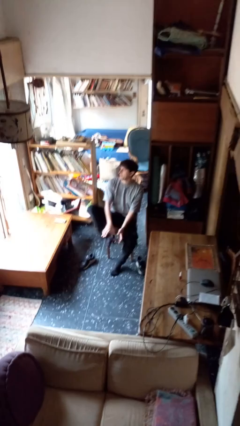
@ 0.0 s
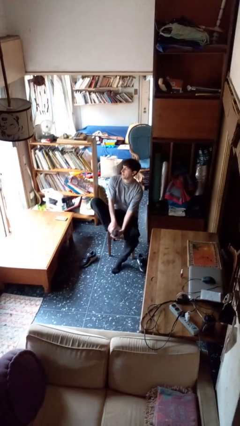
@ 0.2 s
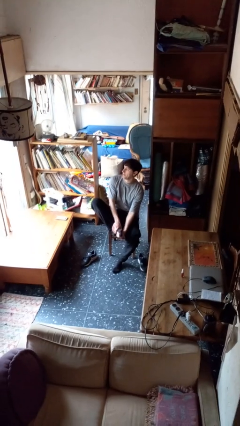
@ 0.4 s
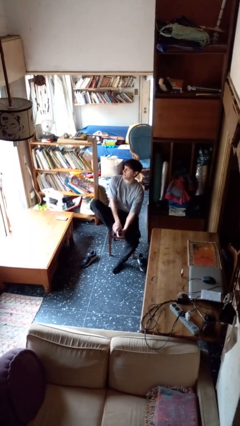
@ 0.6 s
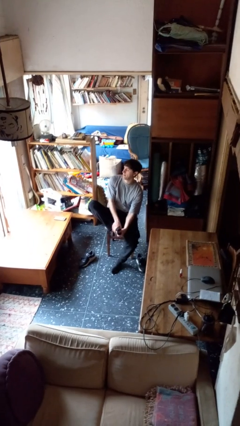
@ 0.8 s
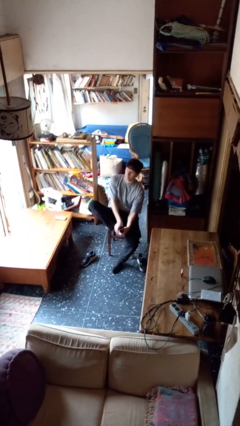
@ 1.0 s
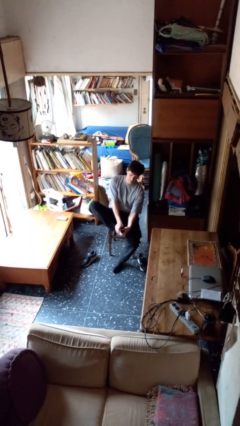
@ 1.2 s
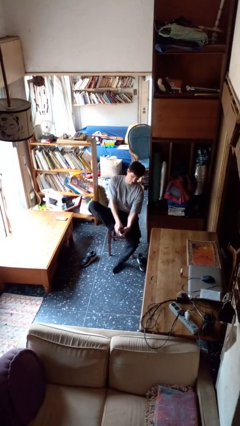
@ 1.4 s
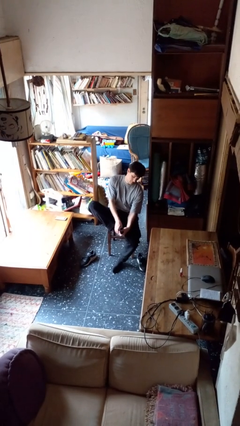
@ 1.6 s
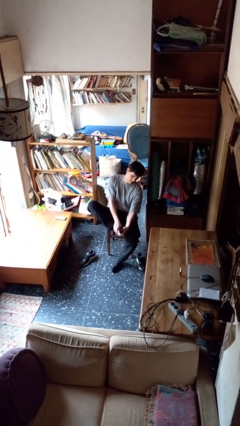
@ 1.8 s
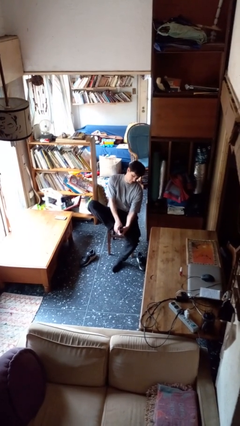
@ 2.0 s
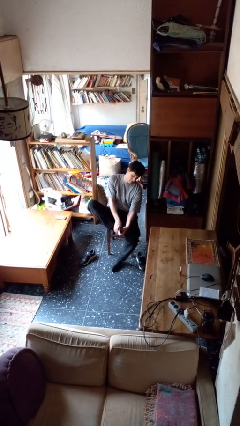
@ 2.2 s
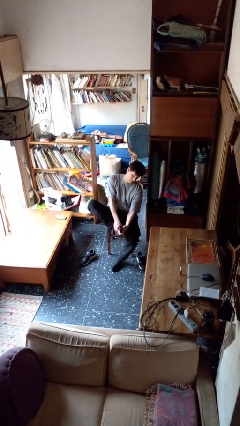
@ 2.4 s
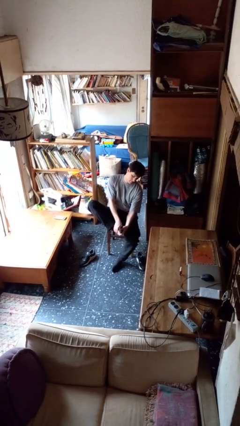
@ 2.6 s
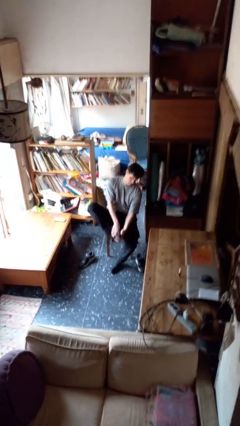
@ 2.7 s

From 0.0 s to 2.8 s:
person rubs foot

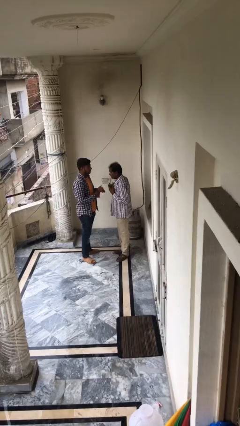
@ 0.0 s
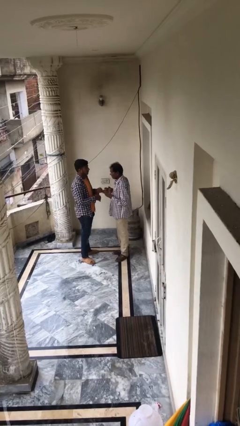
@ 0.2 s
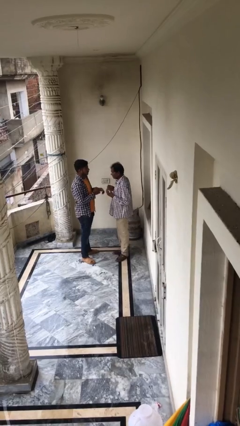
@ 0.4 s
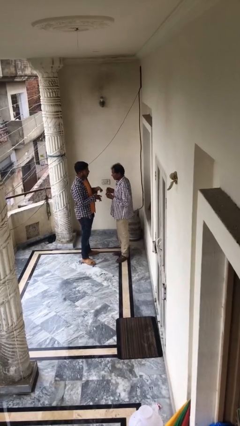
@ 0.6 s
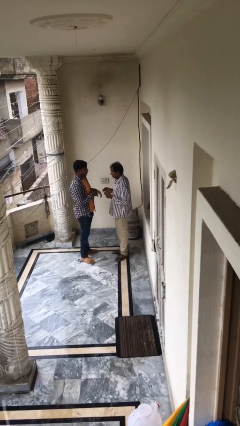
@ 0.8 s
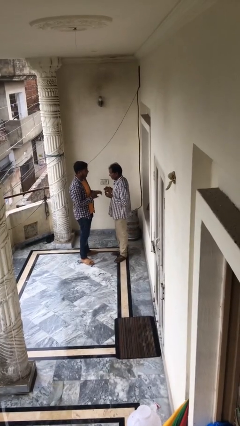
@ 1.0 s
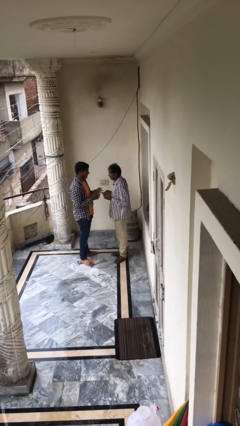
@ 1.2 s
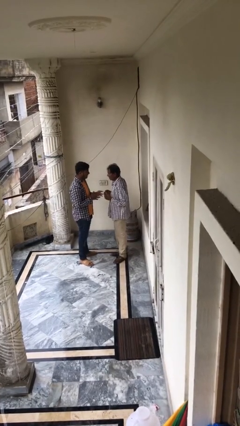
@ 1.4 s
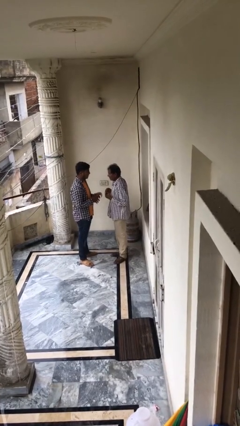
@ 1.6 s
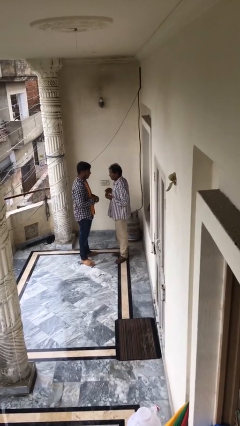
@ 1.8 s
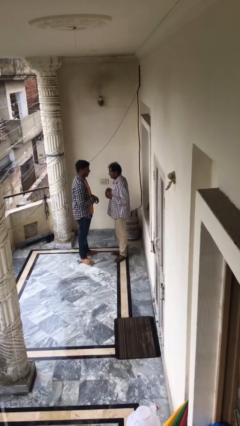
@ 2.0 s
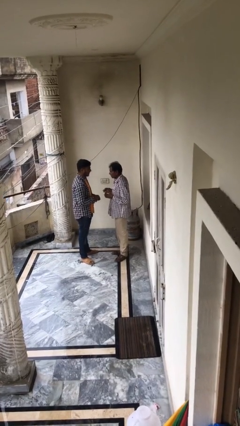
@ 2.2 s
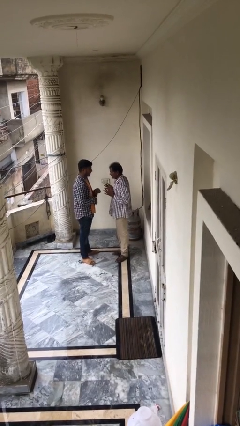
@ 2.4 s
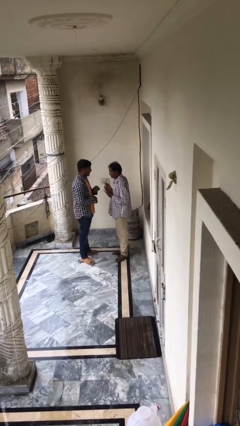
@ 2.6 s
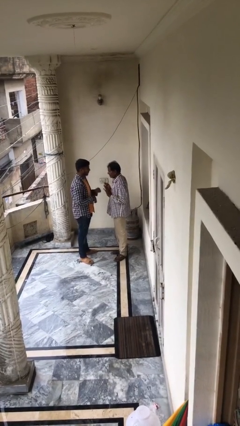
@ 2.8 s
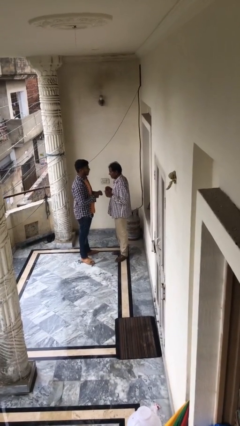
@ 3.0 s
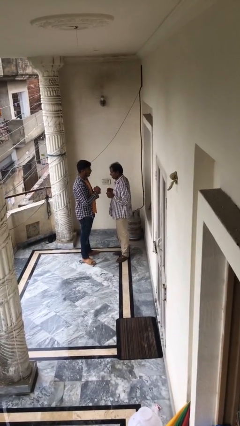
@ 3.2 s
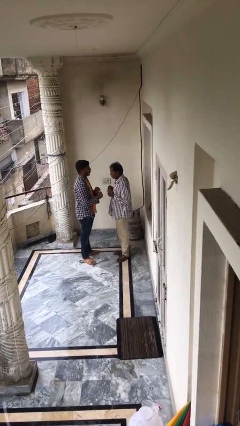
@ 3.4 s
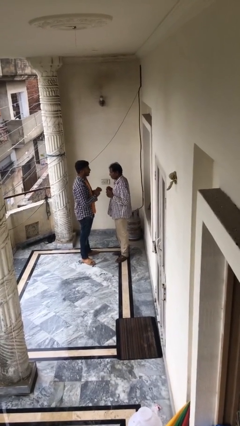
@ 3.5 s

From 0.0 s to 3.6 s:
person talks to person

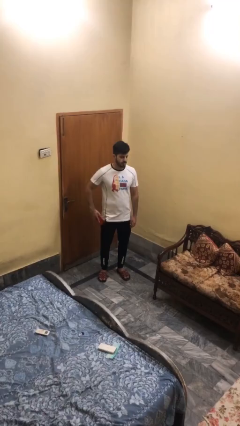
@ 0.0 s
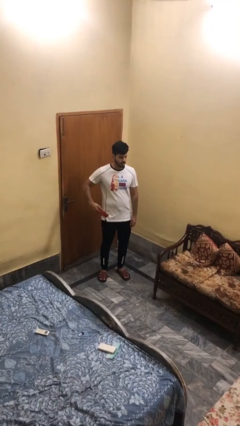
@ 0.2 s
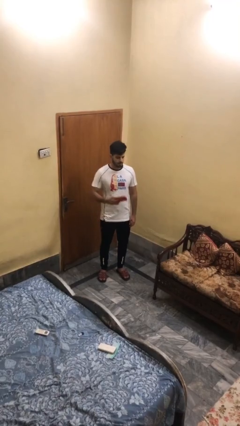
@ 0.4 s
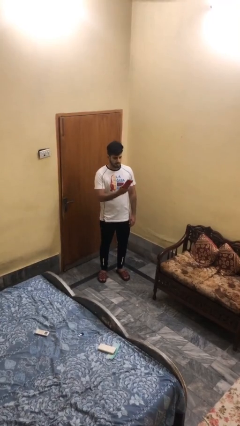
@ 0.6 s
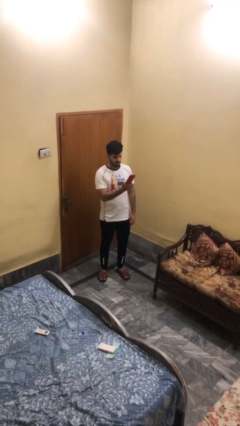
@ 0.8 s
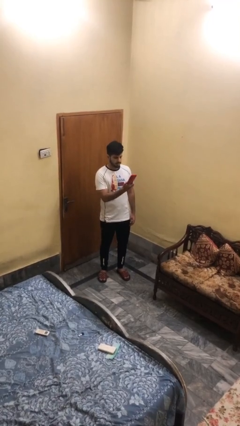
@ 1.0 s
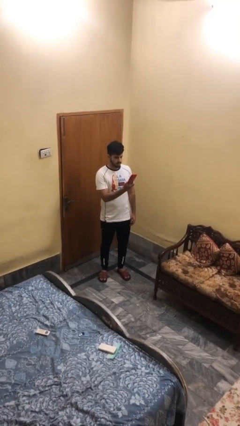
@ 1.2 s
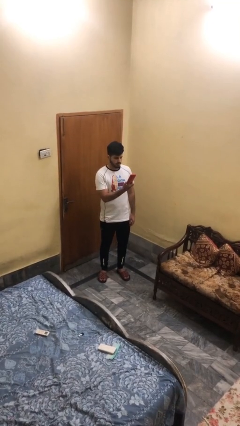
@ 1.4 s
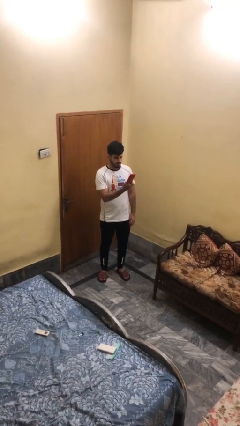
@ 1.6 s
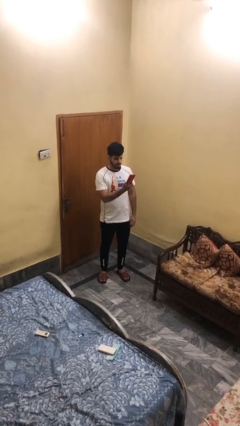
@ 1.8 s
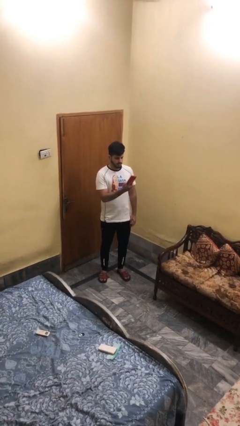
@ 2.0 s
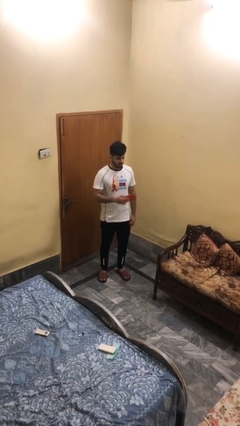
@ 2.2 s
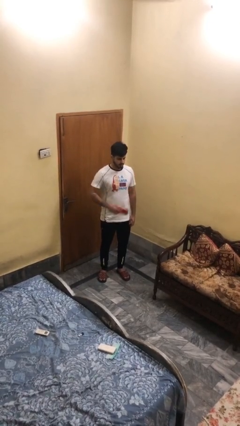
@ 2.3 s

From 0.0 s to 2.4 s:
person takes phone from pocket

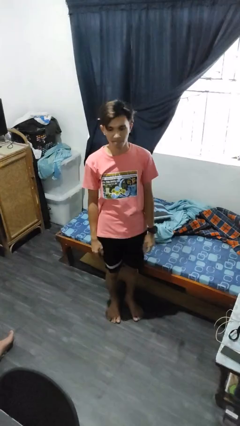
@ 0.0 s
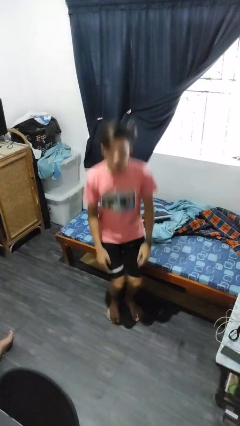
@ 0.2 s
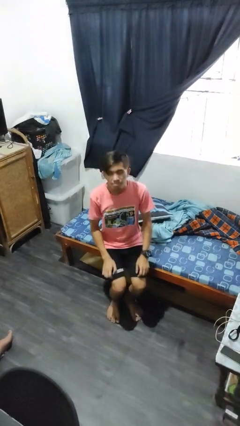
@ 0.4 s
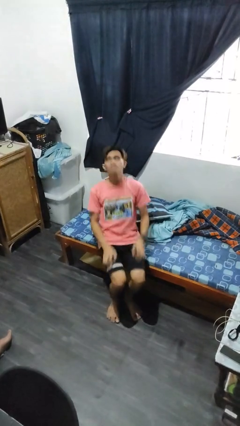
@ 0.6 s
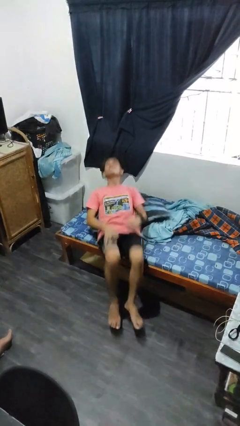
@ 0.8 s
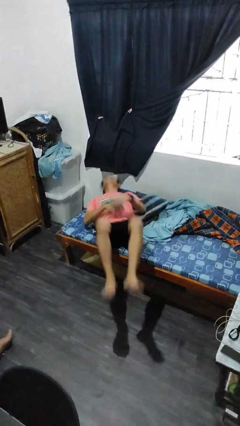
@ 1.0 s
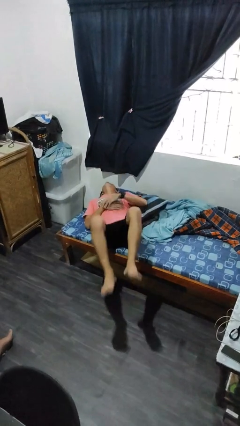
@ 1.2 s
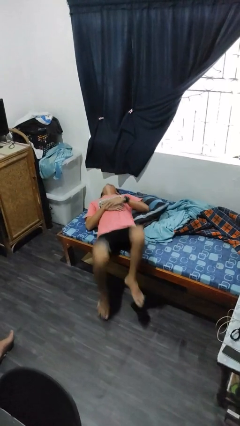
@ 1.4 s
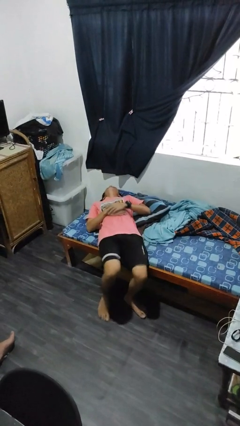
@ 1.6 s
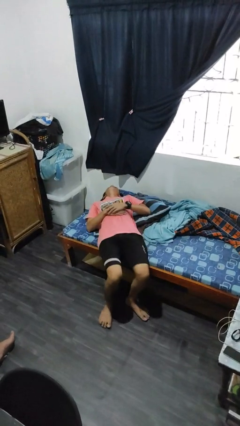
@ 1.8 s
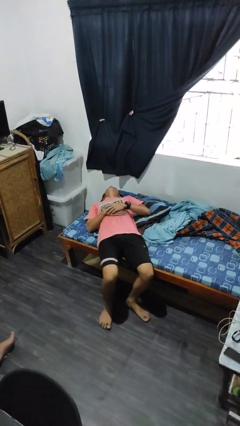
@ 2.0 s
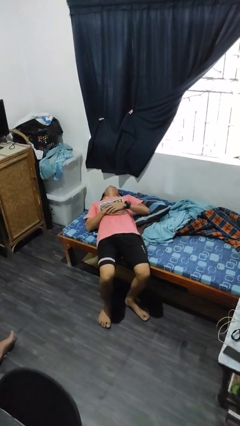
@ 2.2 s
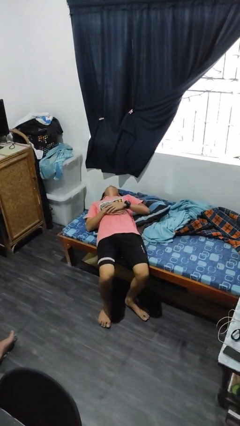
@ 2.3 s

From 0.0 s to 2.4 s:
person lies down on bed

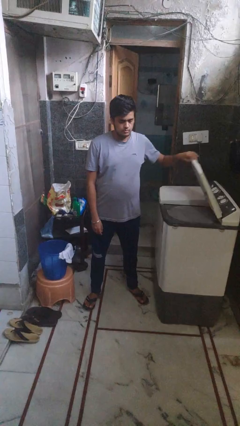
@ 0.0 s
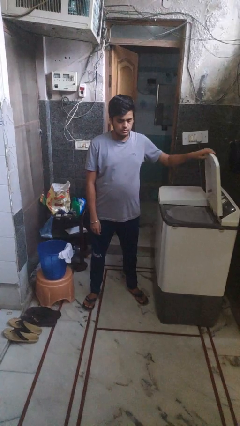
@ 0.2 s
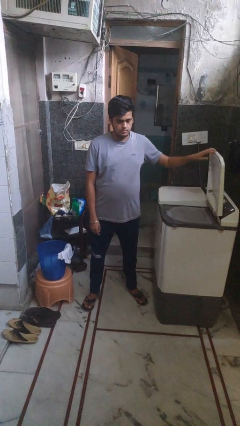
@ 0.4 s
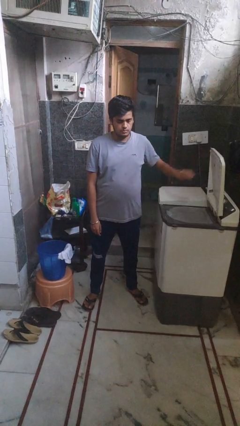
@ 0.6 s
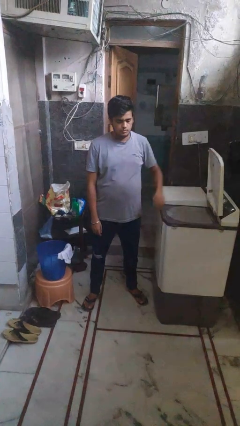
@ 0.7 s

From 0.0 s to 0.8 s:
person opens clothes washer

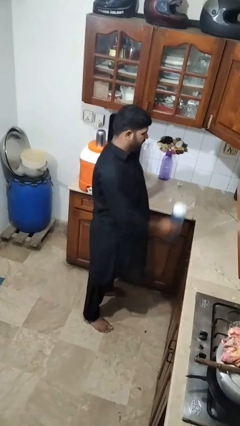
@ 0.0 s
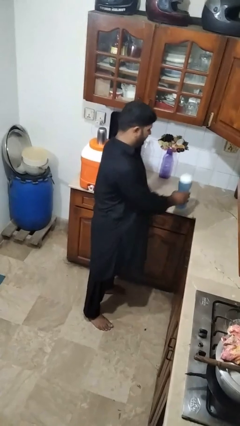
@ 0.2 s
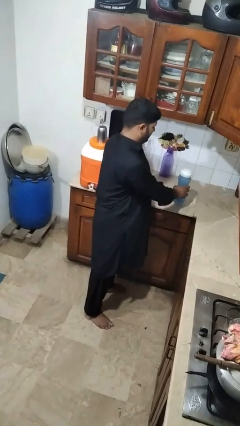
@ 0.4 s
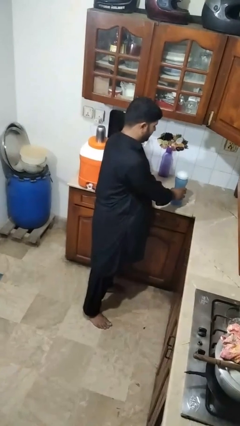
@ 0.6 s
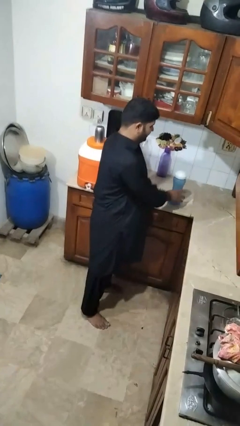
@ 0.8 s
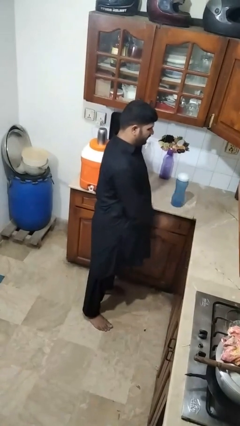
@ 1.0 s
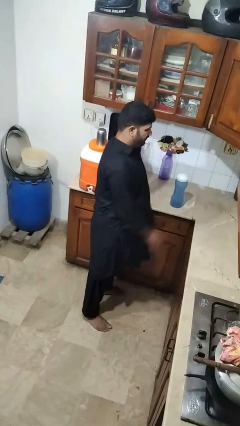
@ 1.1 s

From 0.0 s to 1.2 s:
person puts down object on countertop

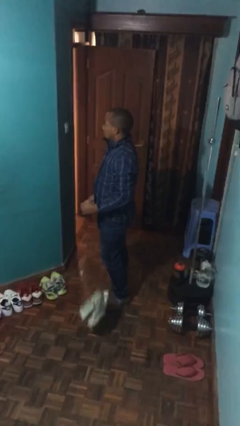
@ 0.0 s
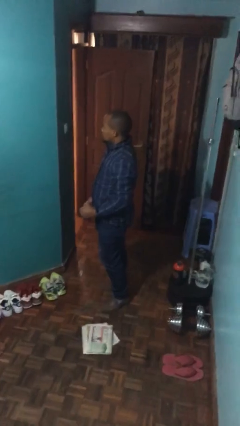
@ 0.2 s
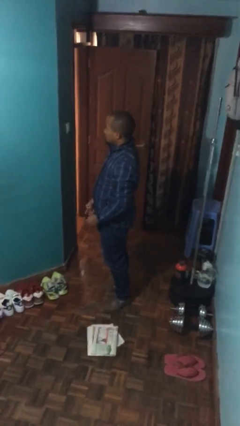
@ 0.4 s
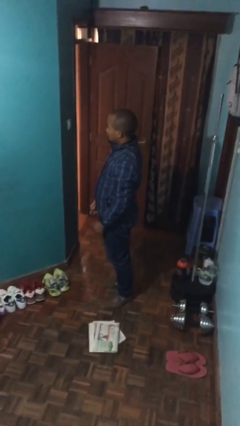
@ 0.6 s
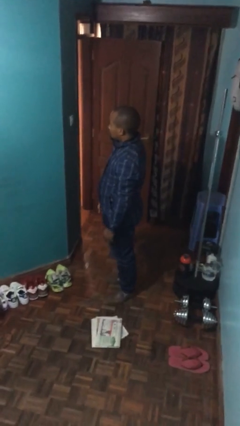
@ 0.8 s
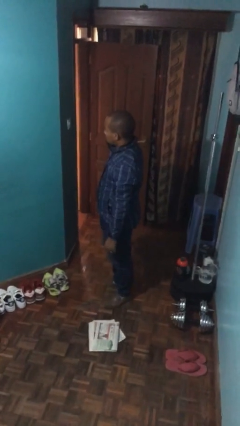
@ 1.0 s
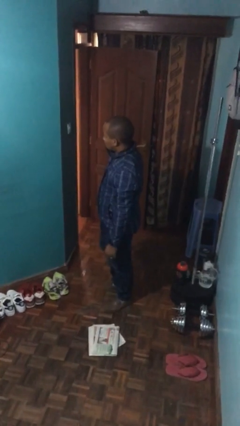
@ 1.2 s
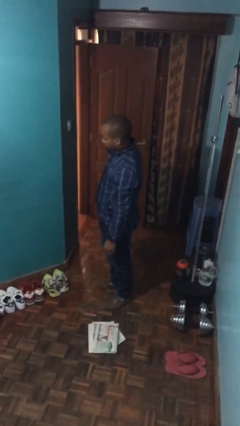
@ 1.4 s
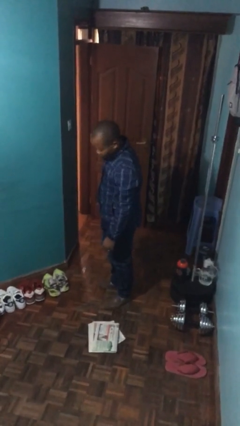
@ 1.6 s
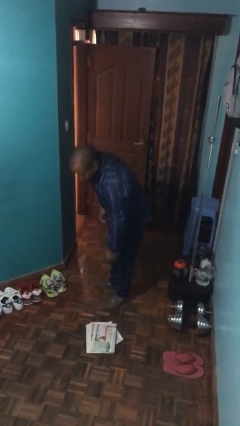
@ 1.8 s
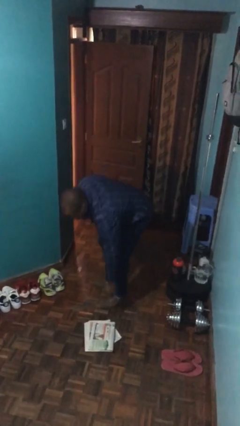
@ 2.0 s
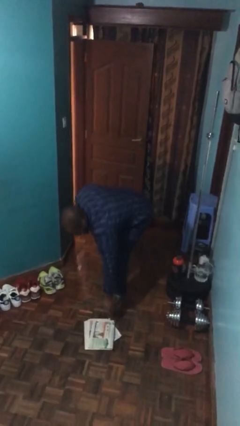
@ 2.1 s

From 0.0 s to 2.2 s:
person drops object

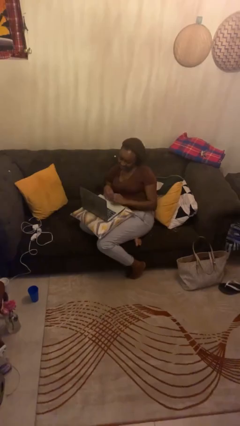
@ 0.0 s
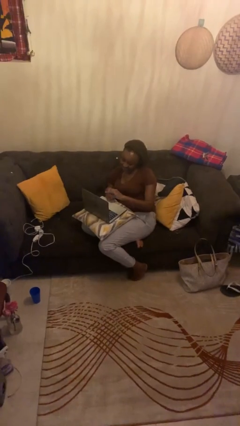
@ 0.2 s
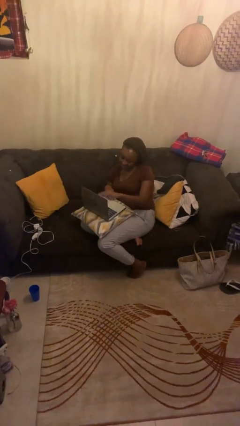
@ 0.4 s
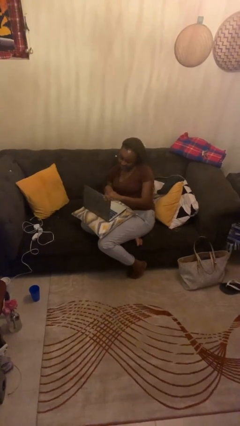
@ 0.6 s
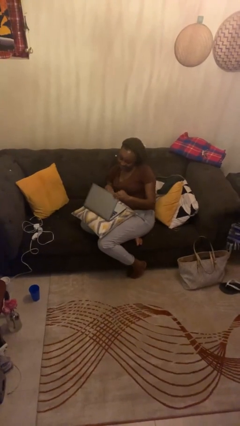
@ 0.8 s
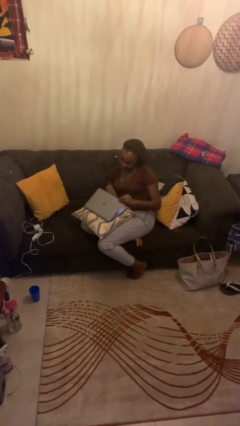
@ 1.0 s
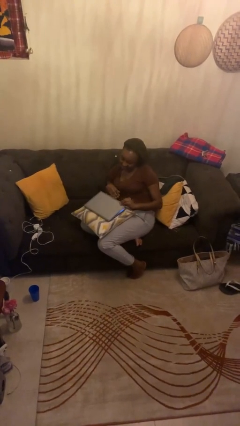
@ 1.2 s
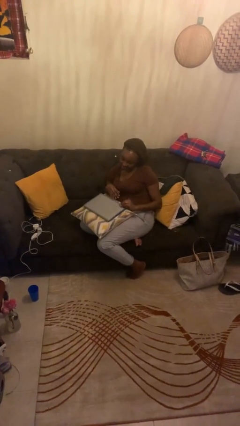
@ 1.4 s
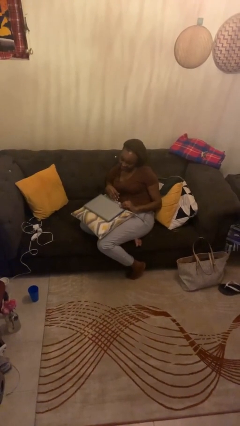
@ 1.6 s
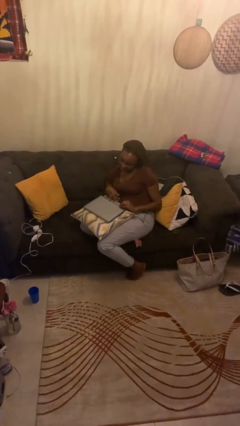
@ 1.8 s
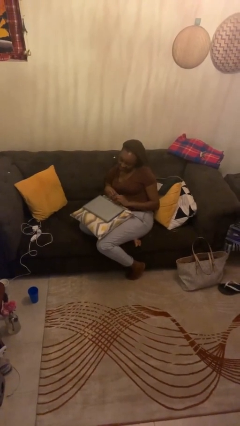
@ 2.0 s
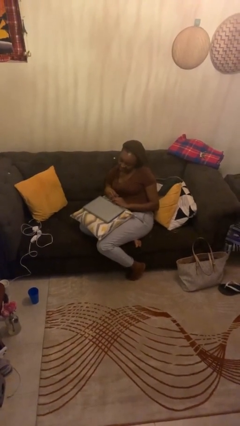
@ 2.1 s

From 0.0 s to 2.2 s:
person closes laptop
